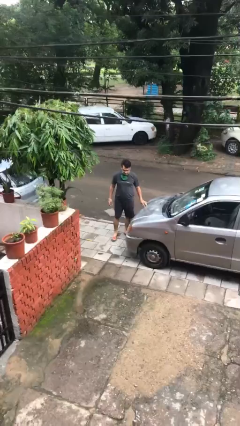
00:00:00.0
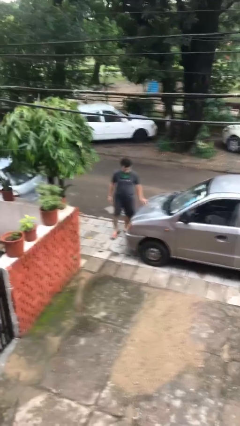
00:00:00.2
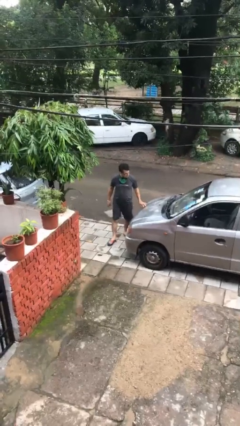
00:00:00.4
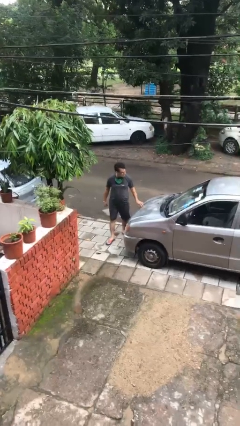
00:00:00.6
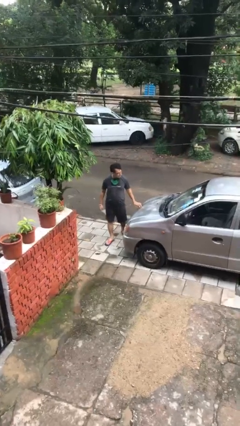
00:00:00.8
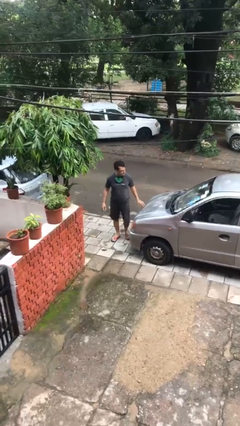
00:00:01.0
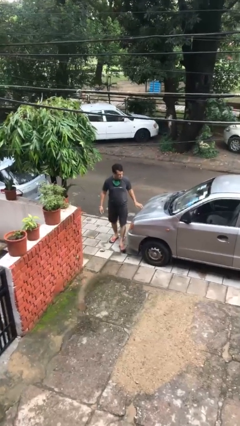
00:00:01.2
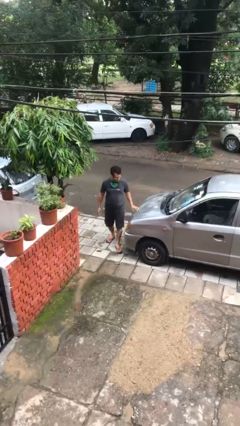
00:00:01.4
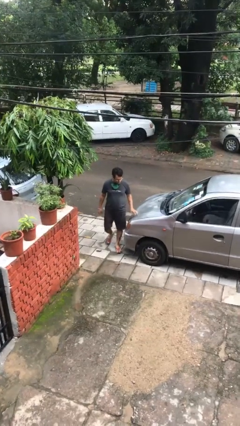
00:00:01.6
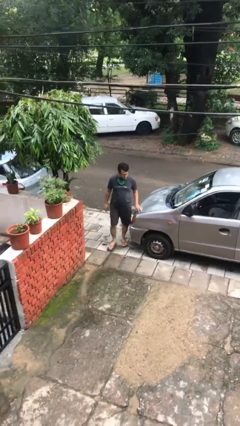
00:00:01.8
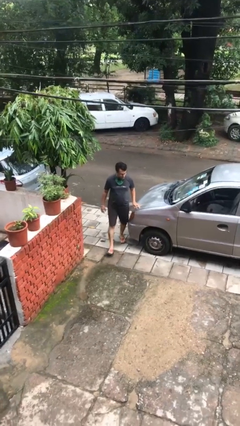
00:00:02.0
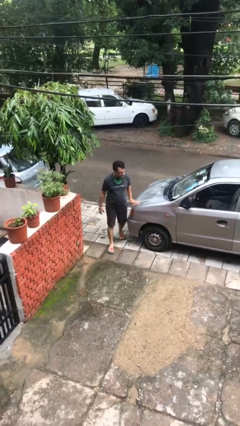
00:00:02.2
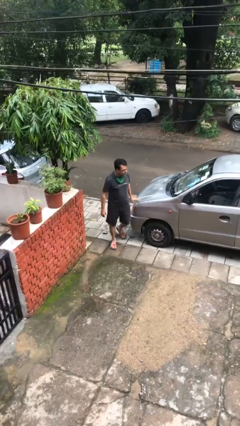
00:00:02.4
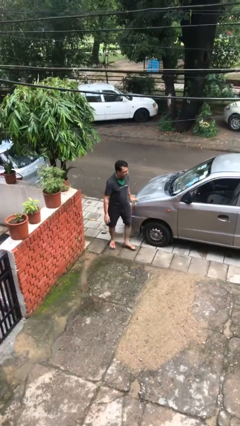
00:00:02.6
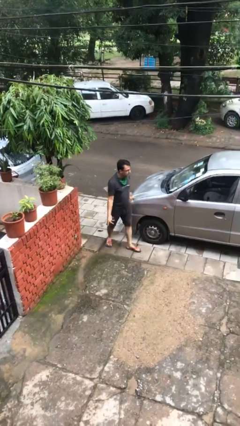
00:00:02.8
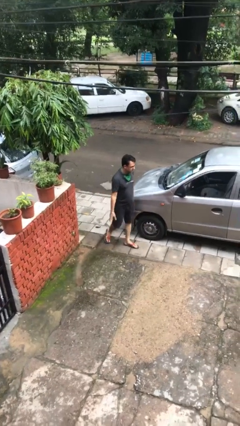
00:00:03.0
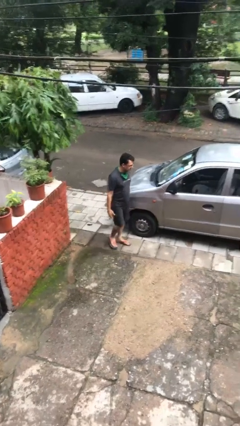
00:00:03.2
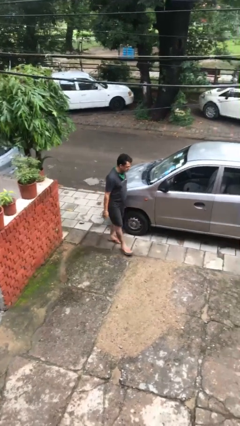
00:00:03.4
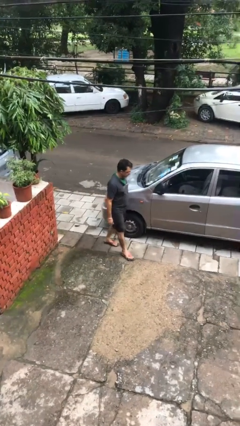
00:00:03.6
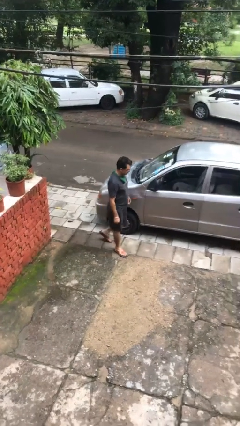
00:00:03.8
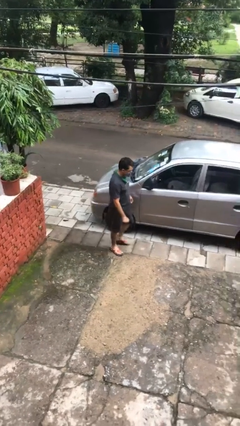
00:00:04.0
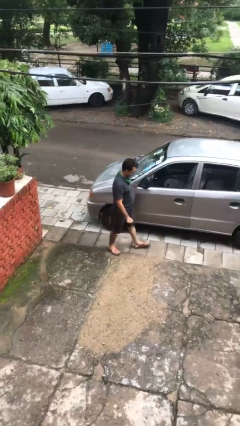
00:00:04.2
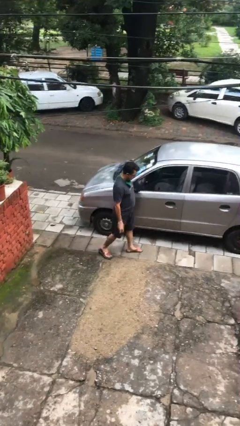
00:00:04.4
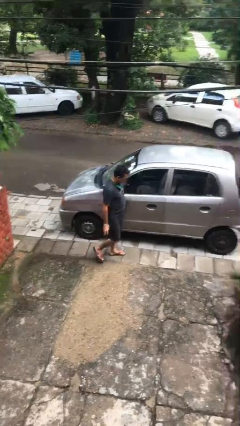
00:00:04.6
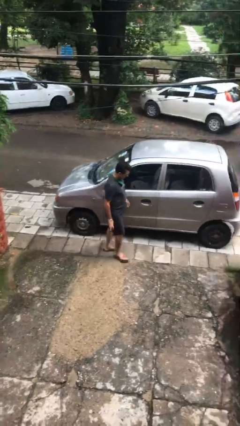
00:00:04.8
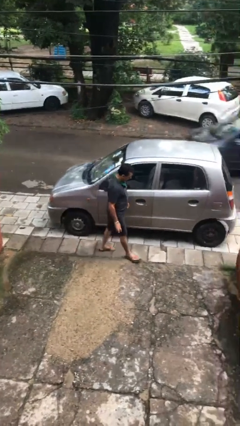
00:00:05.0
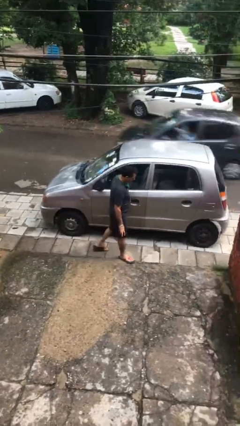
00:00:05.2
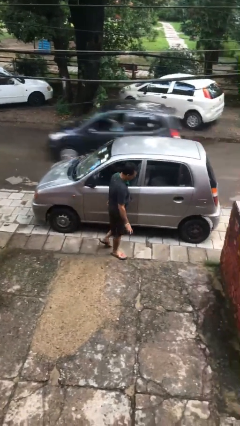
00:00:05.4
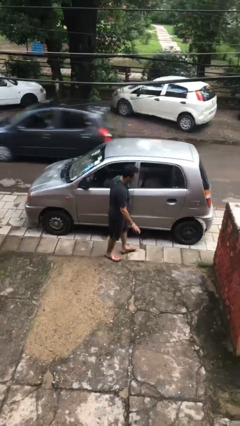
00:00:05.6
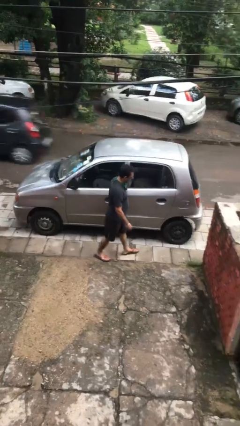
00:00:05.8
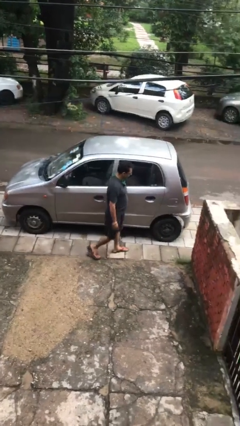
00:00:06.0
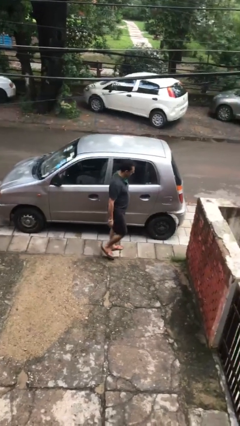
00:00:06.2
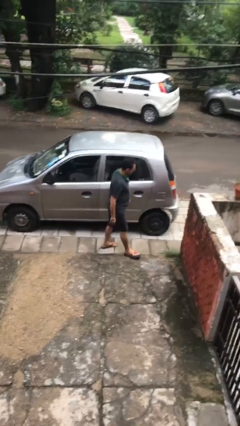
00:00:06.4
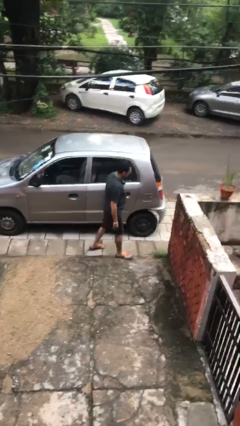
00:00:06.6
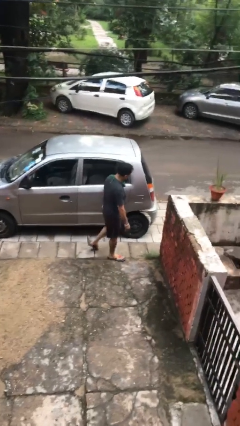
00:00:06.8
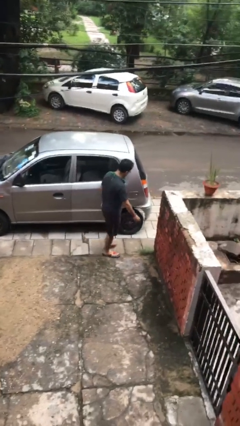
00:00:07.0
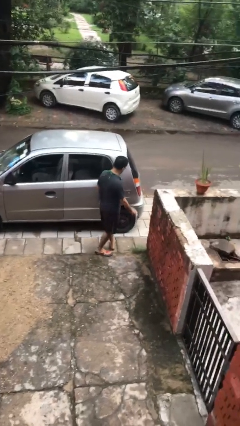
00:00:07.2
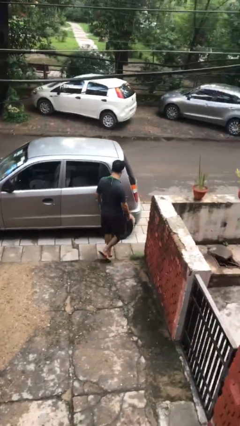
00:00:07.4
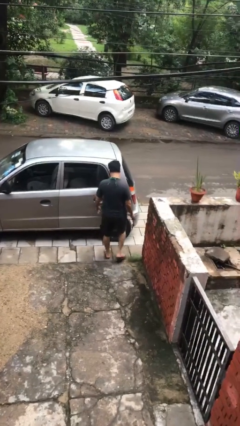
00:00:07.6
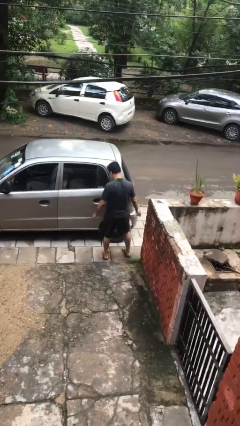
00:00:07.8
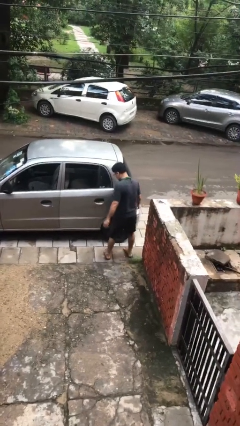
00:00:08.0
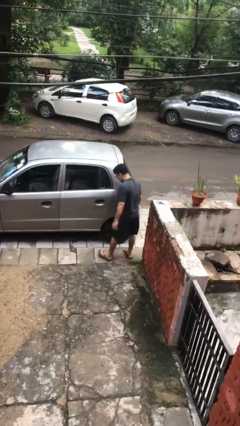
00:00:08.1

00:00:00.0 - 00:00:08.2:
person walks around car

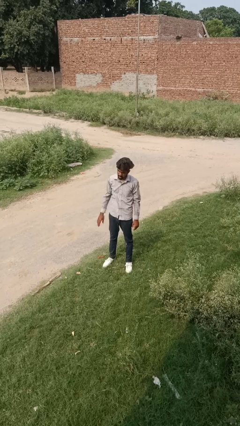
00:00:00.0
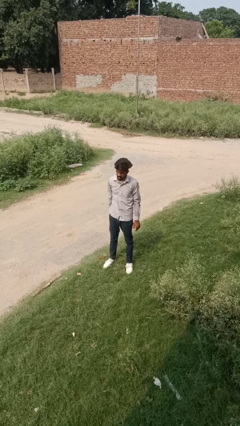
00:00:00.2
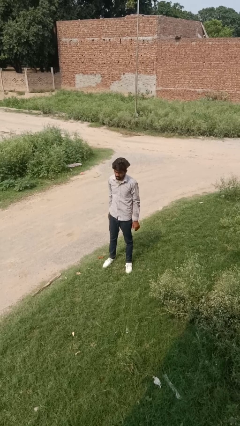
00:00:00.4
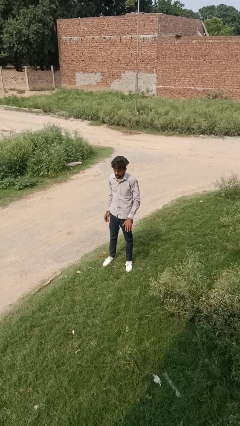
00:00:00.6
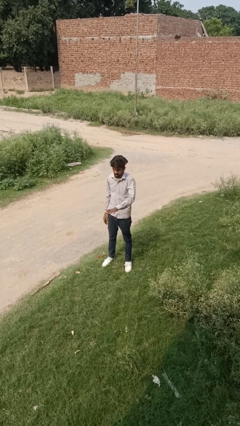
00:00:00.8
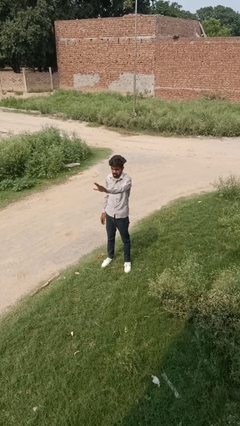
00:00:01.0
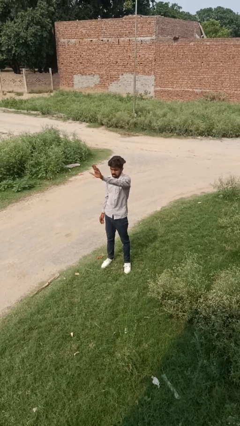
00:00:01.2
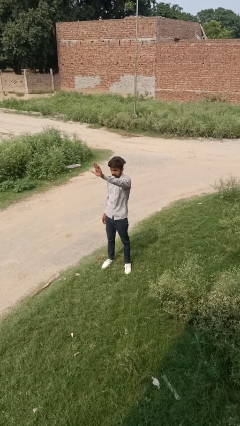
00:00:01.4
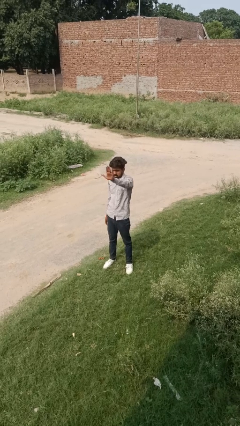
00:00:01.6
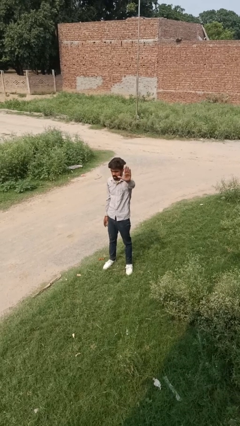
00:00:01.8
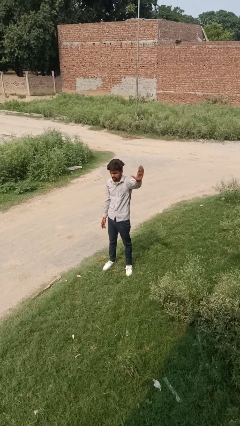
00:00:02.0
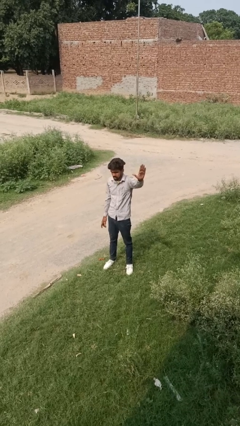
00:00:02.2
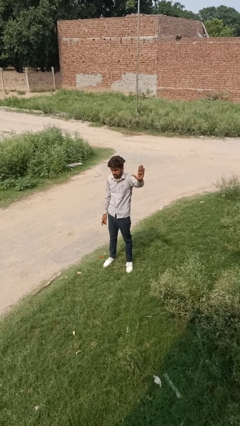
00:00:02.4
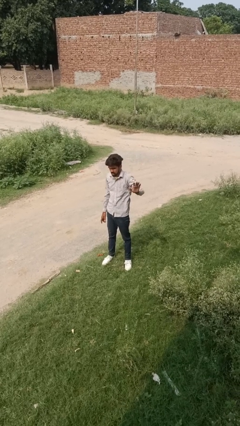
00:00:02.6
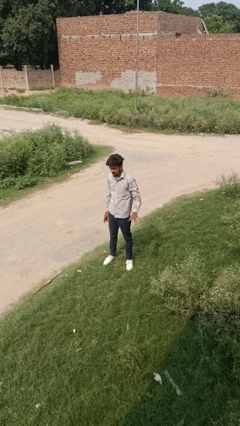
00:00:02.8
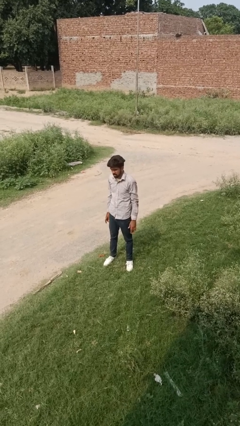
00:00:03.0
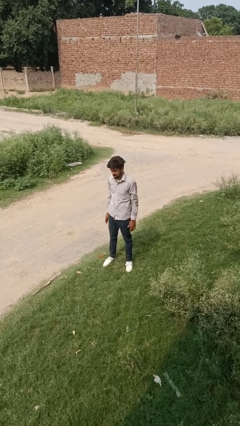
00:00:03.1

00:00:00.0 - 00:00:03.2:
person gestures swipe left

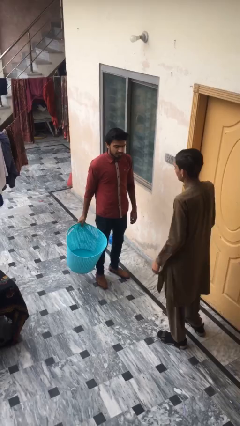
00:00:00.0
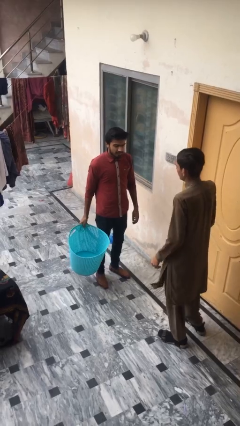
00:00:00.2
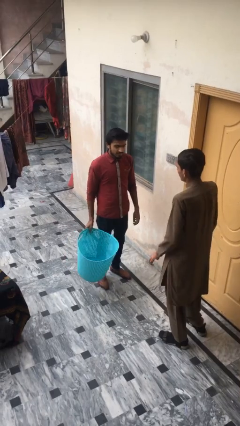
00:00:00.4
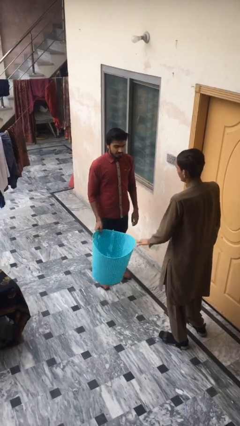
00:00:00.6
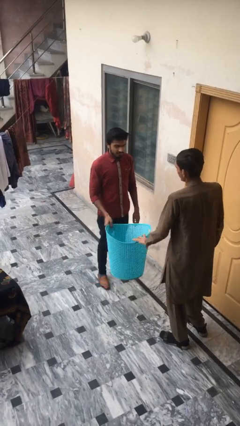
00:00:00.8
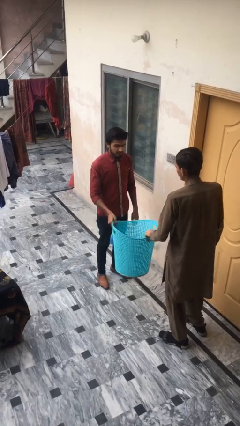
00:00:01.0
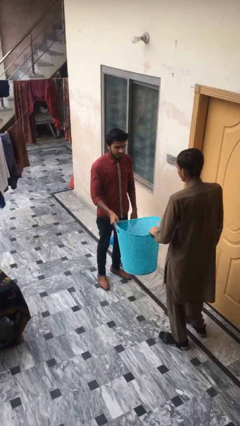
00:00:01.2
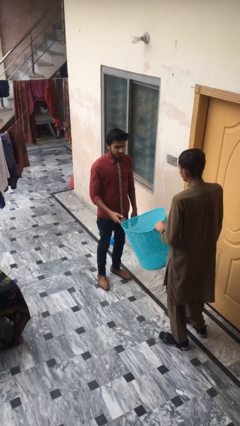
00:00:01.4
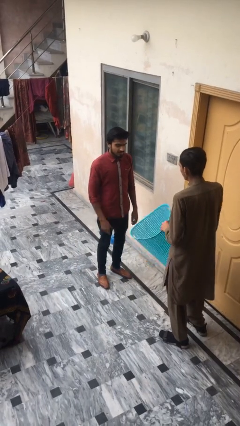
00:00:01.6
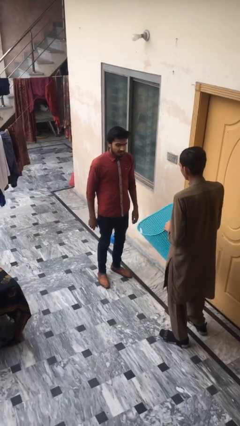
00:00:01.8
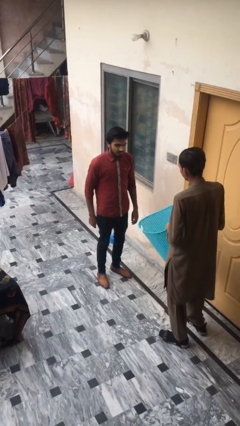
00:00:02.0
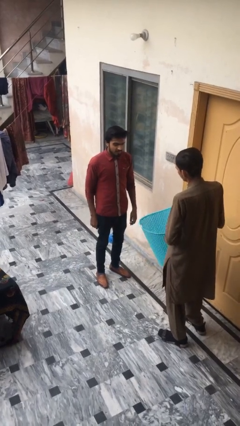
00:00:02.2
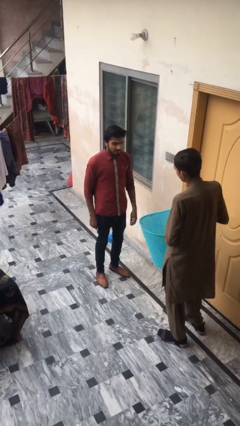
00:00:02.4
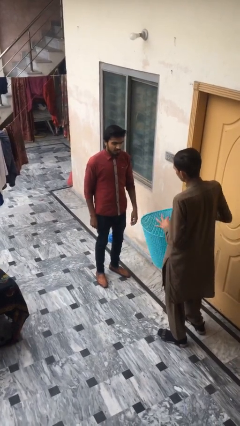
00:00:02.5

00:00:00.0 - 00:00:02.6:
person transfers object to person

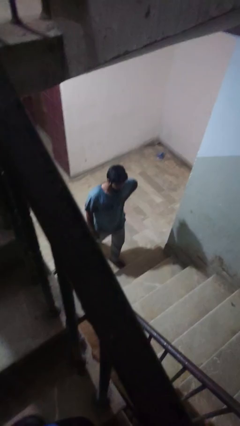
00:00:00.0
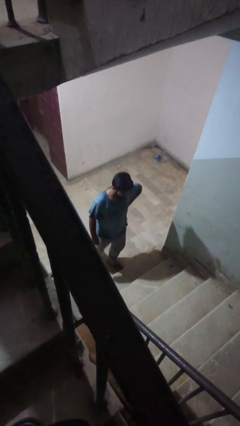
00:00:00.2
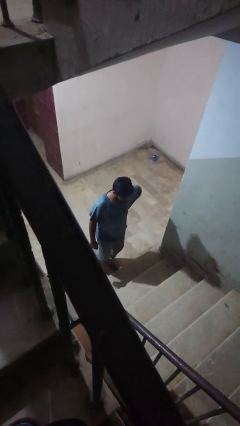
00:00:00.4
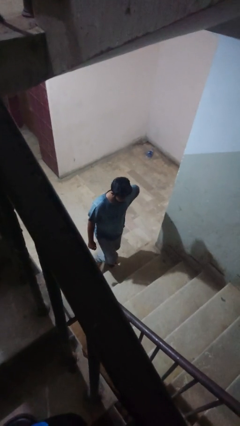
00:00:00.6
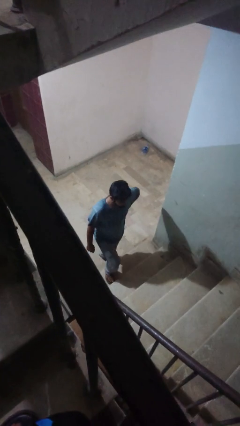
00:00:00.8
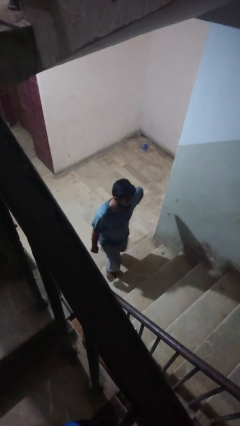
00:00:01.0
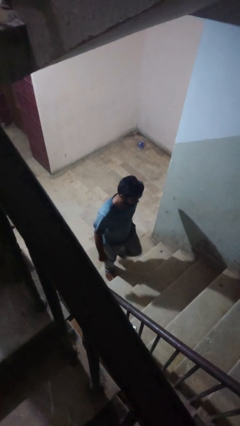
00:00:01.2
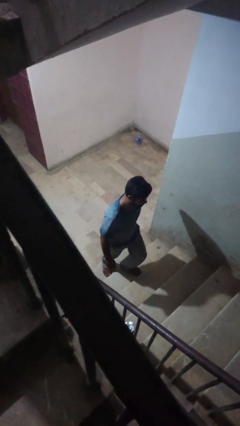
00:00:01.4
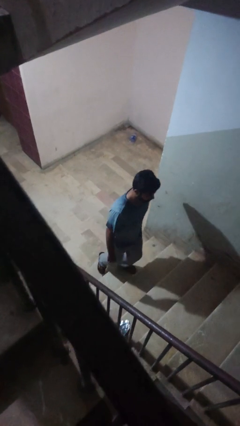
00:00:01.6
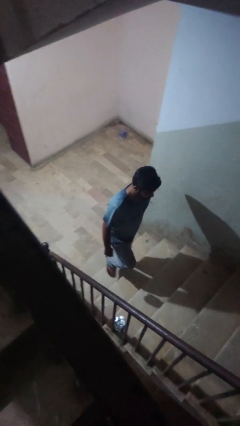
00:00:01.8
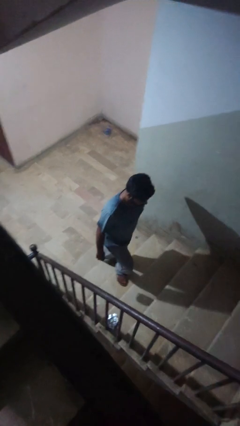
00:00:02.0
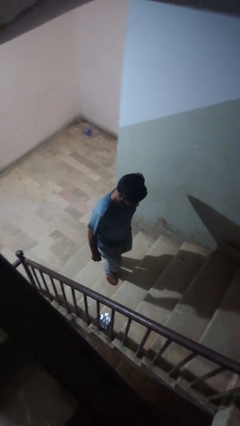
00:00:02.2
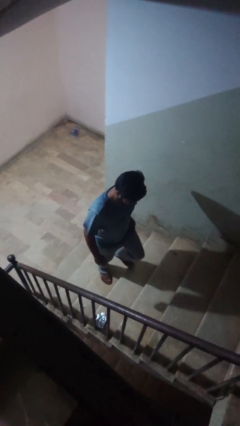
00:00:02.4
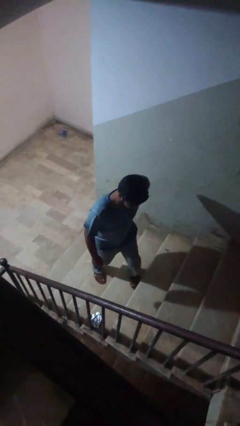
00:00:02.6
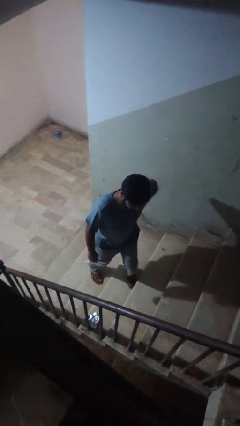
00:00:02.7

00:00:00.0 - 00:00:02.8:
person climbs up stairs

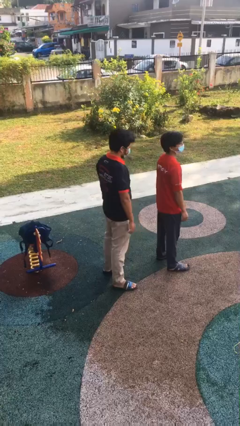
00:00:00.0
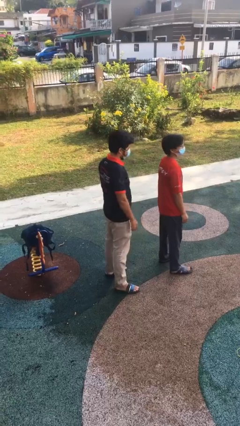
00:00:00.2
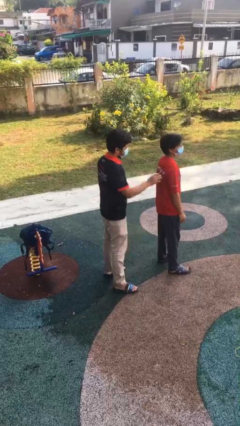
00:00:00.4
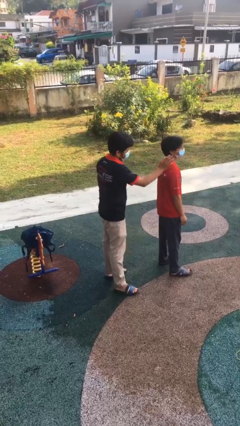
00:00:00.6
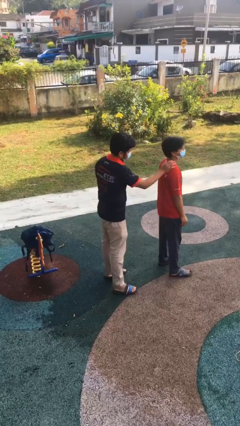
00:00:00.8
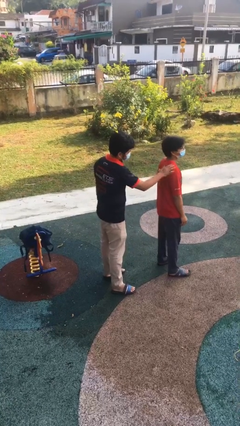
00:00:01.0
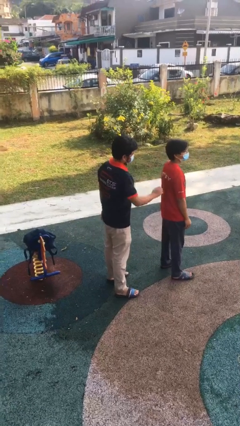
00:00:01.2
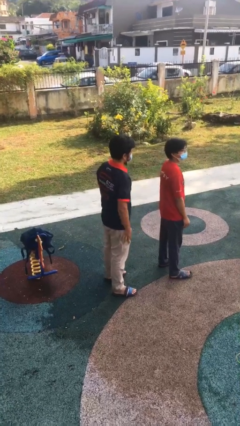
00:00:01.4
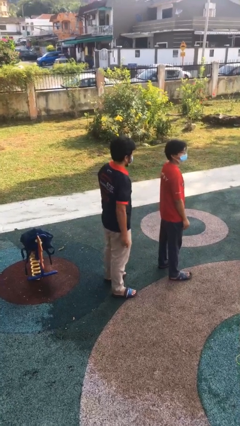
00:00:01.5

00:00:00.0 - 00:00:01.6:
person touches back of person
